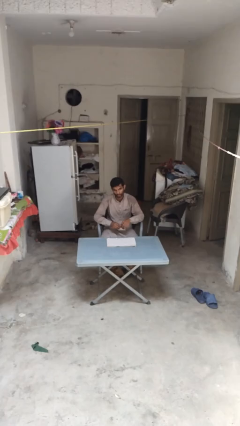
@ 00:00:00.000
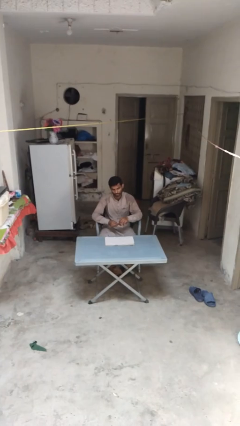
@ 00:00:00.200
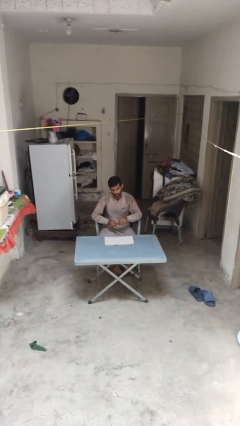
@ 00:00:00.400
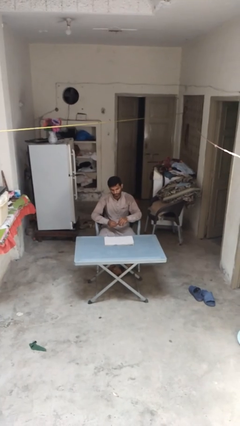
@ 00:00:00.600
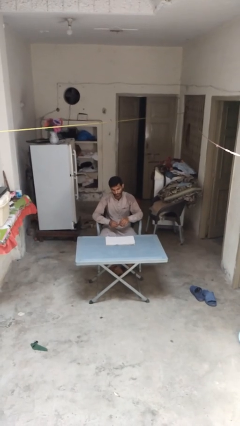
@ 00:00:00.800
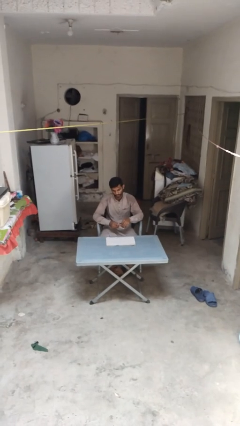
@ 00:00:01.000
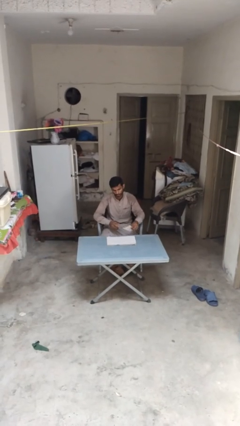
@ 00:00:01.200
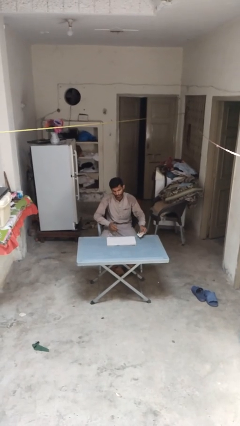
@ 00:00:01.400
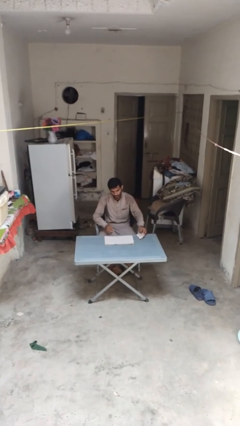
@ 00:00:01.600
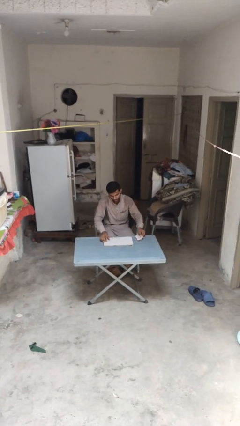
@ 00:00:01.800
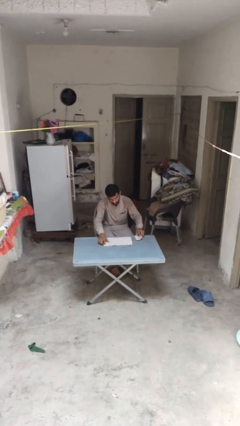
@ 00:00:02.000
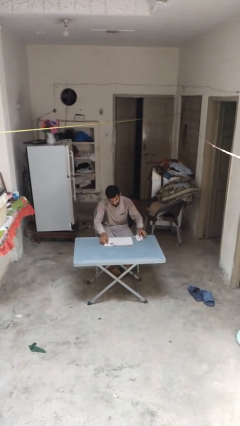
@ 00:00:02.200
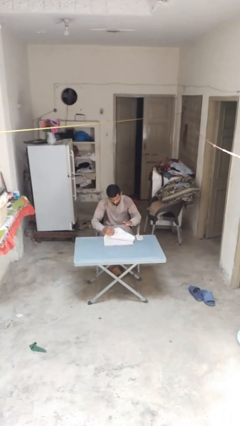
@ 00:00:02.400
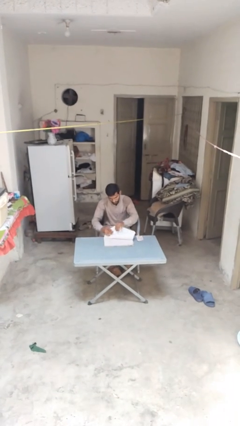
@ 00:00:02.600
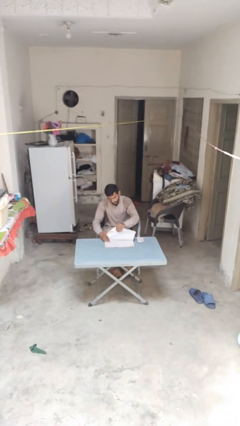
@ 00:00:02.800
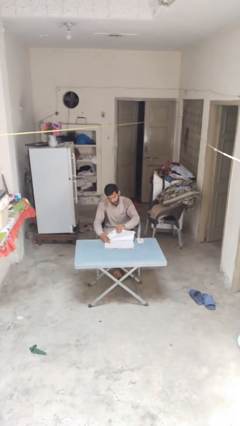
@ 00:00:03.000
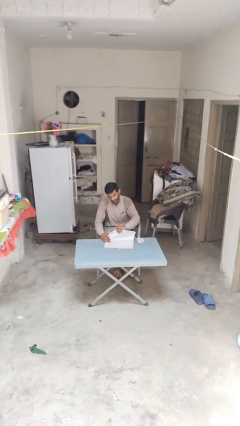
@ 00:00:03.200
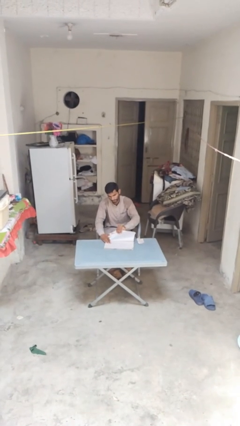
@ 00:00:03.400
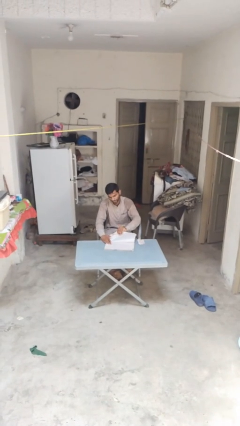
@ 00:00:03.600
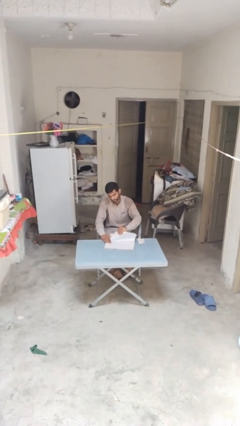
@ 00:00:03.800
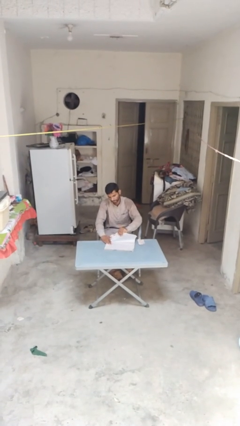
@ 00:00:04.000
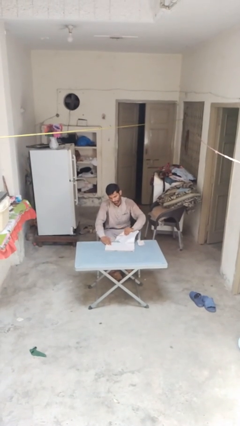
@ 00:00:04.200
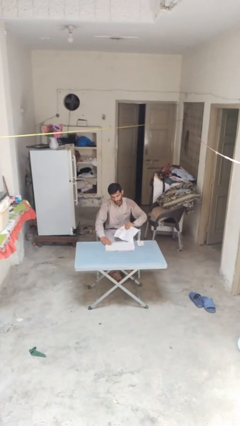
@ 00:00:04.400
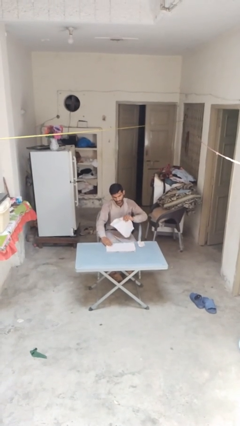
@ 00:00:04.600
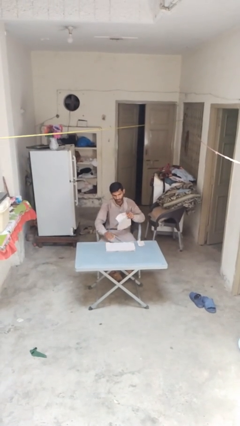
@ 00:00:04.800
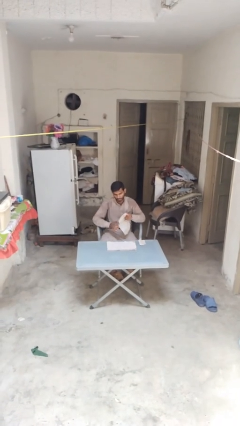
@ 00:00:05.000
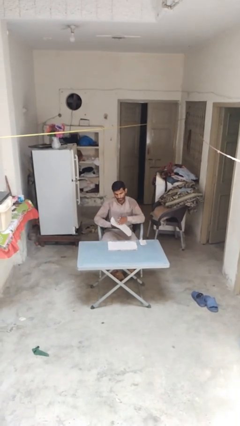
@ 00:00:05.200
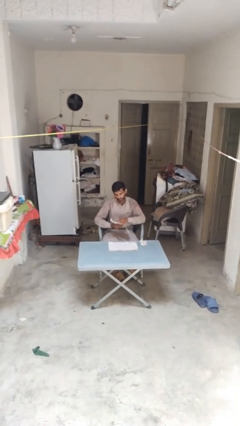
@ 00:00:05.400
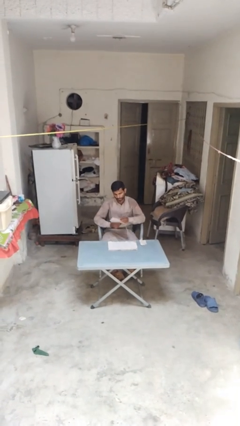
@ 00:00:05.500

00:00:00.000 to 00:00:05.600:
person tears paper

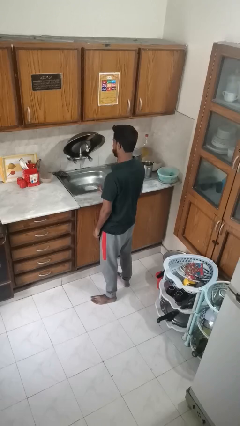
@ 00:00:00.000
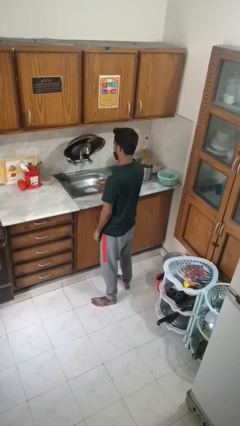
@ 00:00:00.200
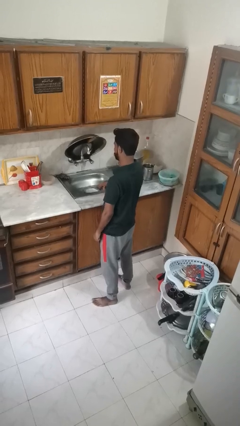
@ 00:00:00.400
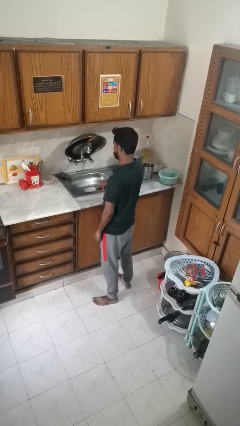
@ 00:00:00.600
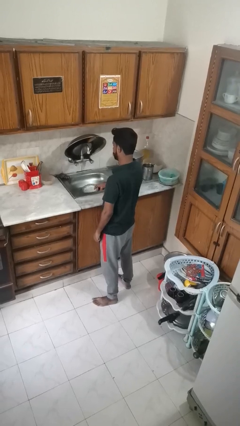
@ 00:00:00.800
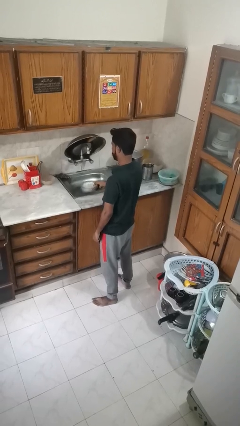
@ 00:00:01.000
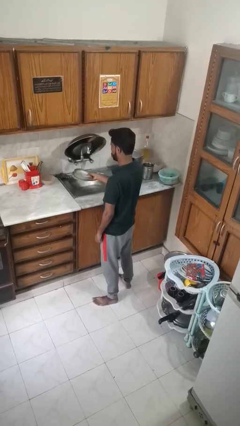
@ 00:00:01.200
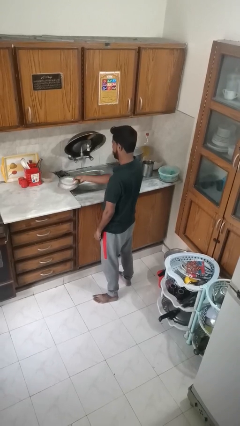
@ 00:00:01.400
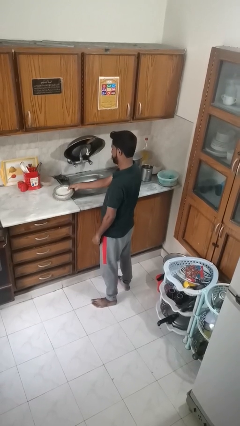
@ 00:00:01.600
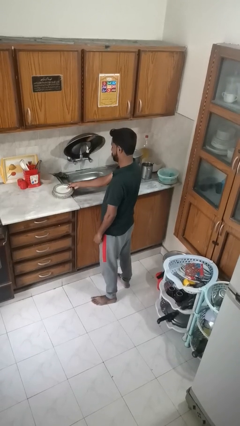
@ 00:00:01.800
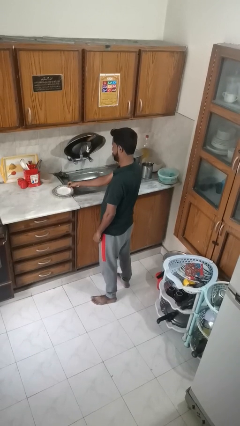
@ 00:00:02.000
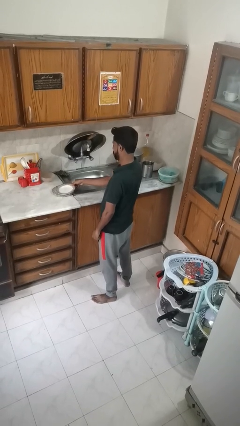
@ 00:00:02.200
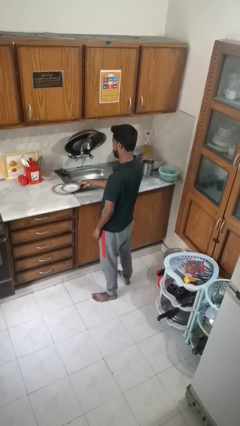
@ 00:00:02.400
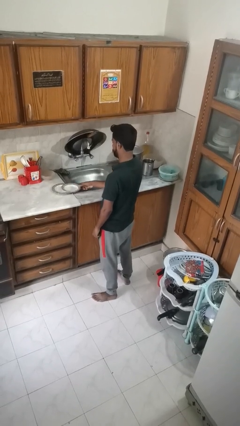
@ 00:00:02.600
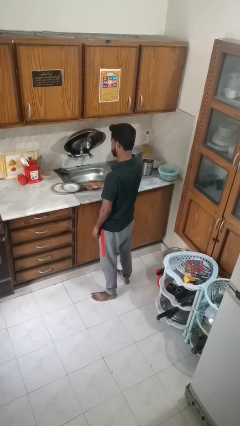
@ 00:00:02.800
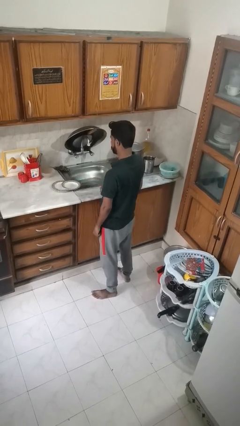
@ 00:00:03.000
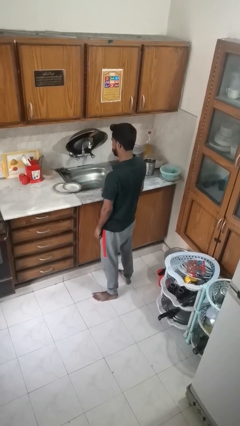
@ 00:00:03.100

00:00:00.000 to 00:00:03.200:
person closes dishwasher

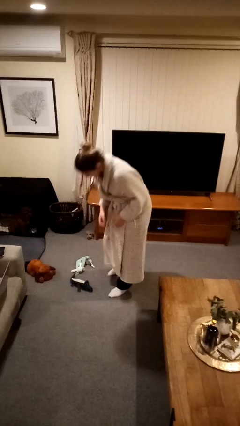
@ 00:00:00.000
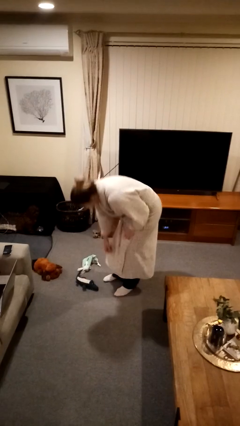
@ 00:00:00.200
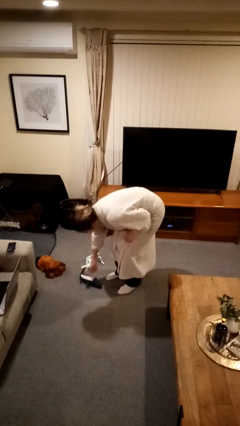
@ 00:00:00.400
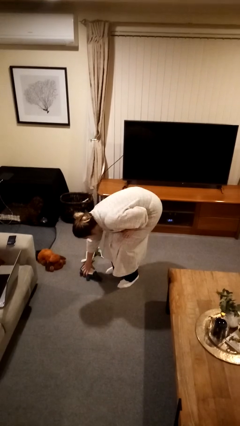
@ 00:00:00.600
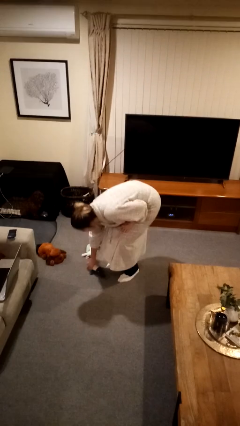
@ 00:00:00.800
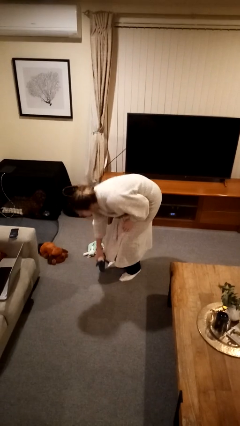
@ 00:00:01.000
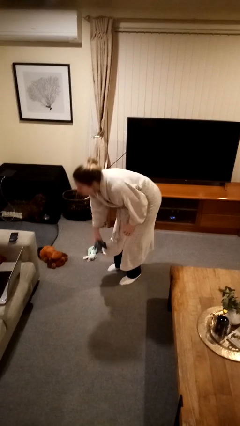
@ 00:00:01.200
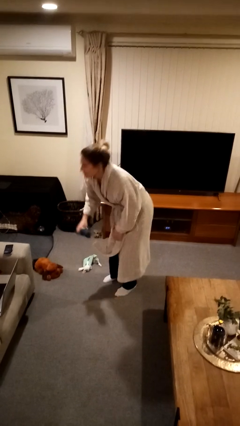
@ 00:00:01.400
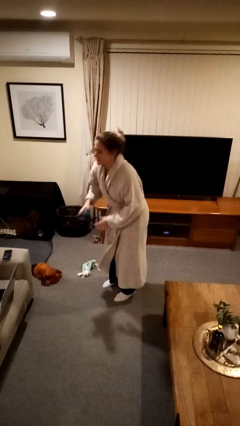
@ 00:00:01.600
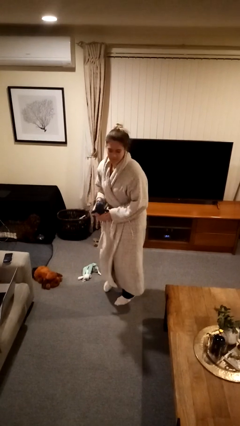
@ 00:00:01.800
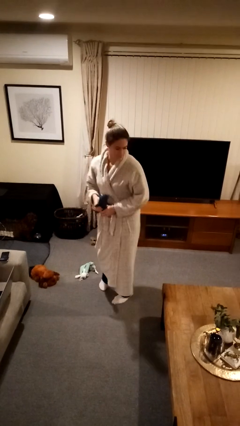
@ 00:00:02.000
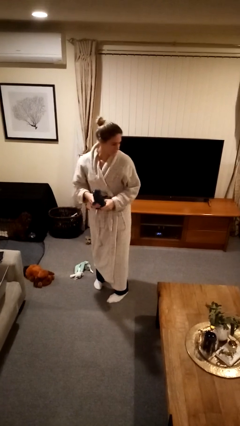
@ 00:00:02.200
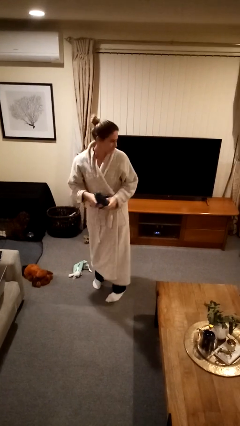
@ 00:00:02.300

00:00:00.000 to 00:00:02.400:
person picks up object from floor

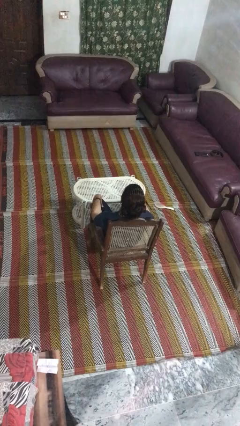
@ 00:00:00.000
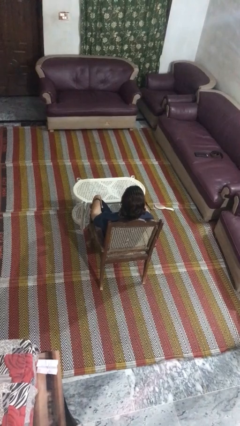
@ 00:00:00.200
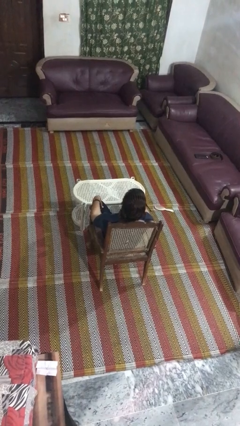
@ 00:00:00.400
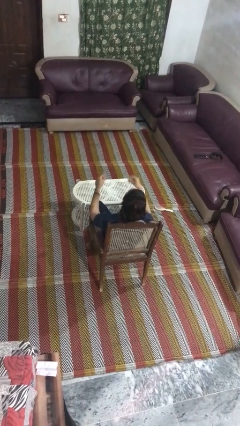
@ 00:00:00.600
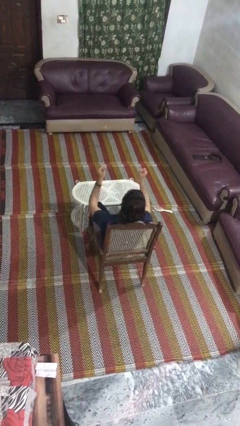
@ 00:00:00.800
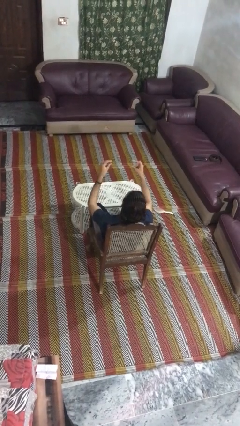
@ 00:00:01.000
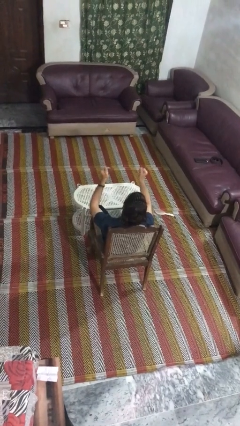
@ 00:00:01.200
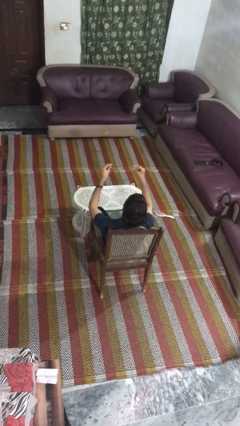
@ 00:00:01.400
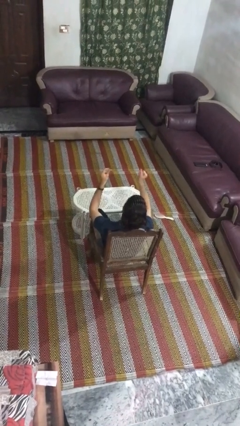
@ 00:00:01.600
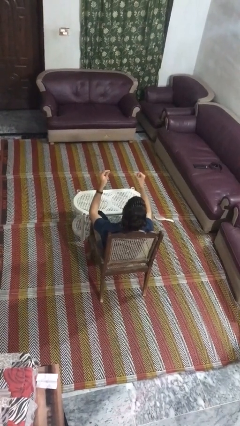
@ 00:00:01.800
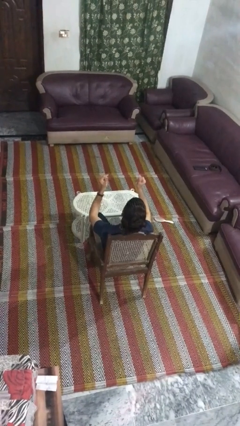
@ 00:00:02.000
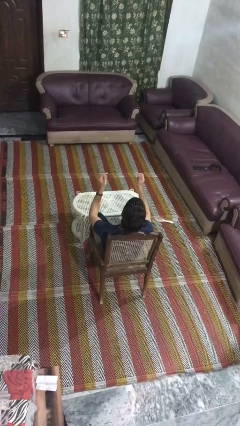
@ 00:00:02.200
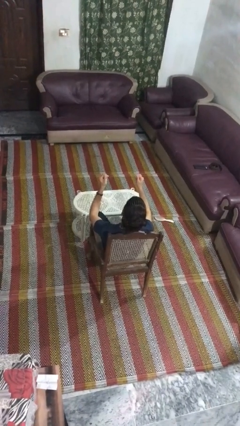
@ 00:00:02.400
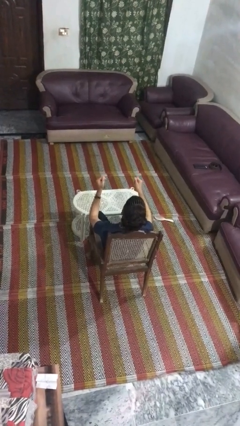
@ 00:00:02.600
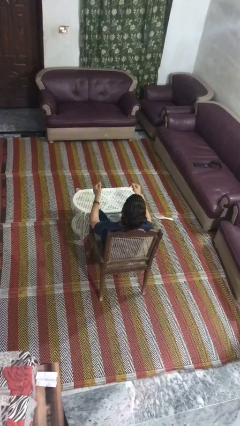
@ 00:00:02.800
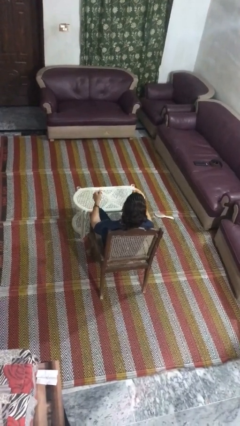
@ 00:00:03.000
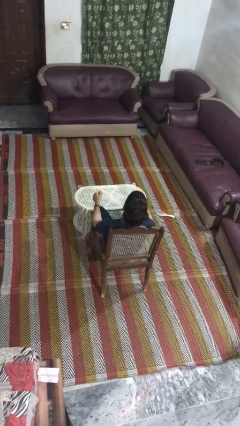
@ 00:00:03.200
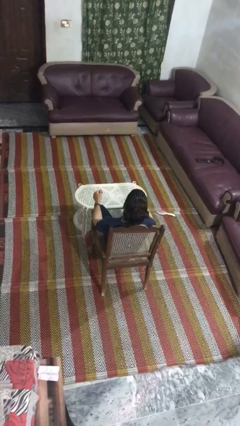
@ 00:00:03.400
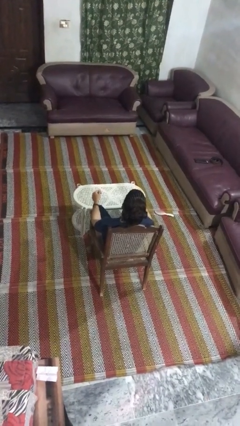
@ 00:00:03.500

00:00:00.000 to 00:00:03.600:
person snaps fingers

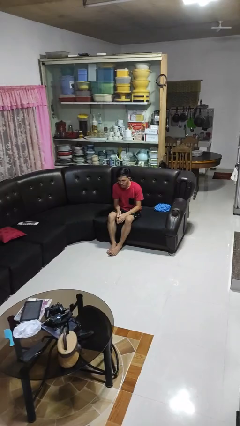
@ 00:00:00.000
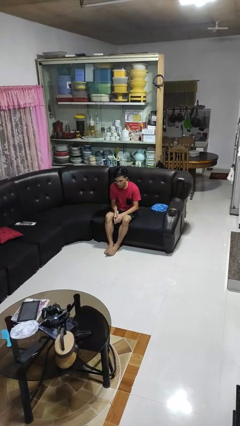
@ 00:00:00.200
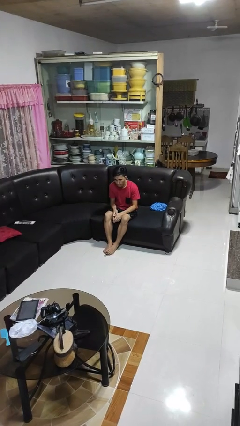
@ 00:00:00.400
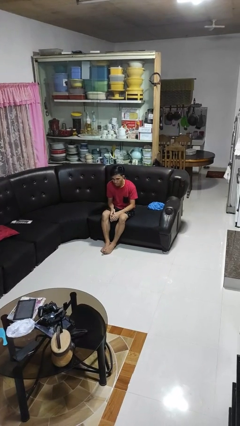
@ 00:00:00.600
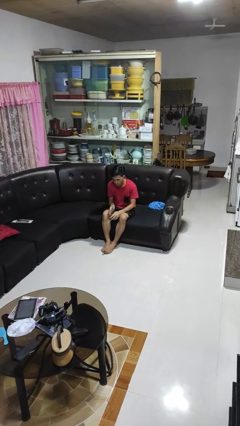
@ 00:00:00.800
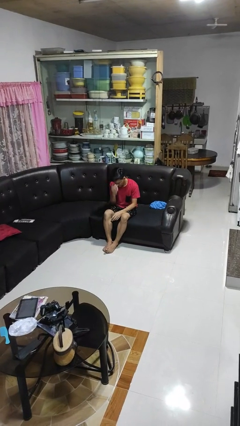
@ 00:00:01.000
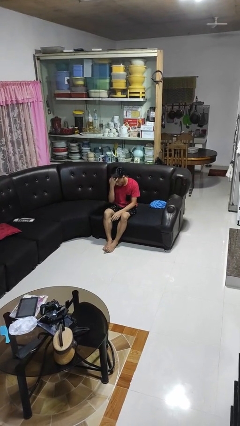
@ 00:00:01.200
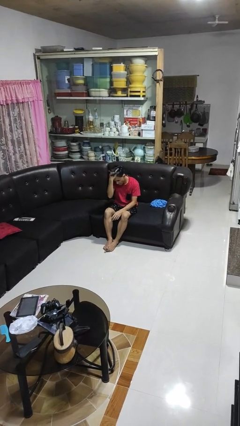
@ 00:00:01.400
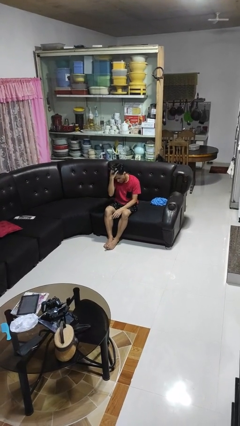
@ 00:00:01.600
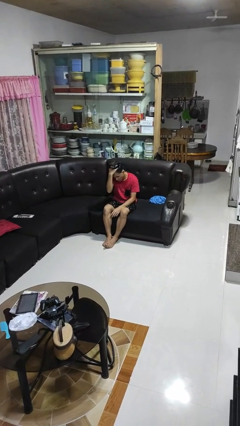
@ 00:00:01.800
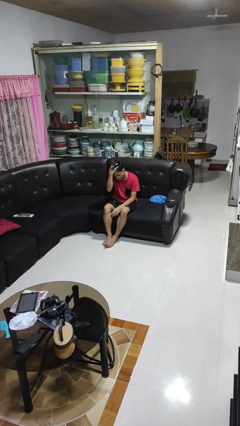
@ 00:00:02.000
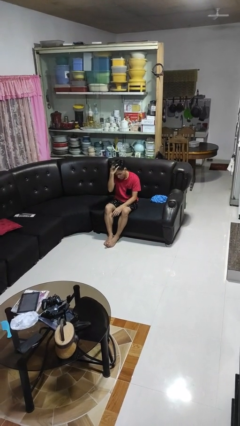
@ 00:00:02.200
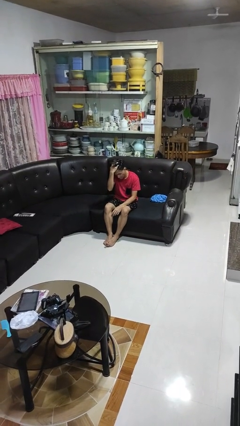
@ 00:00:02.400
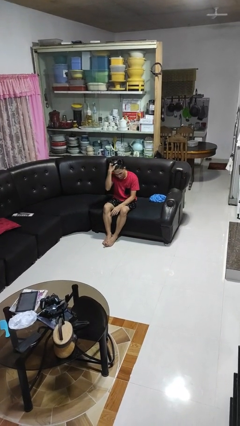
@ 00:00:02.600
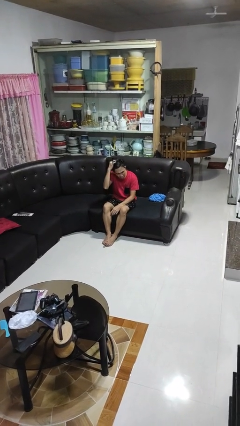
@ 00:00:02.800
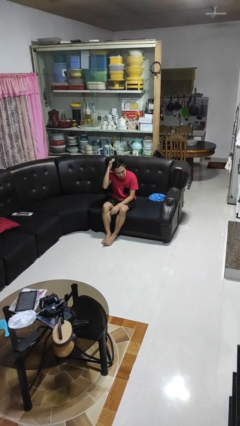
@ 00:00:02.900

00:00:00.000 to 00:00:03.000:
person scratches face
